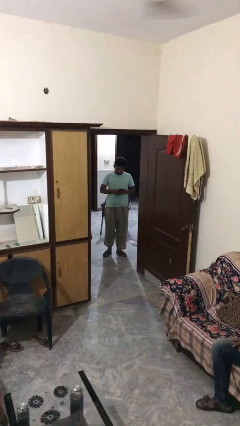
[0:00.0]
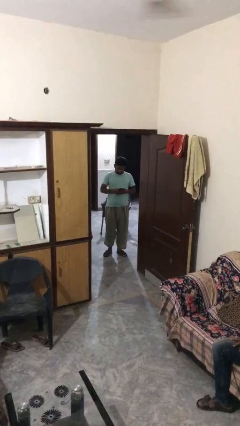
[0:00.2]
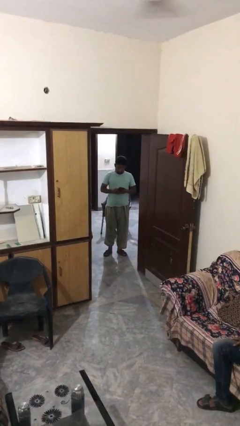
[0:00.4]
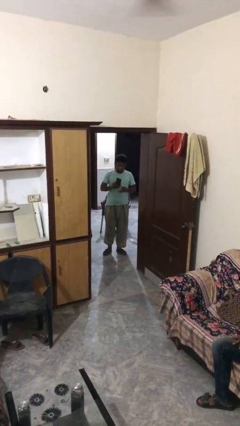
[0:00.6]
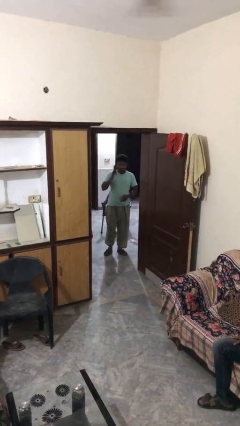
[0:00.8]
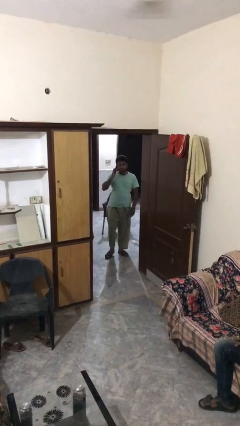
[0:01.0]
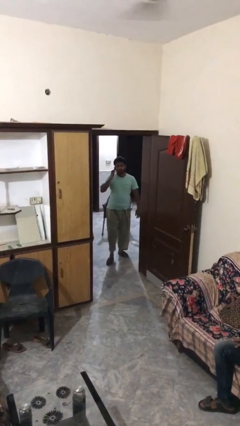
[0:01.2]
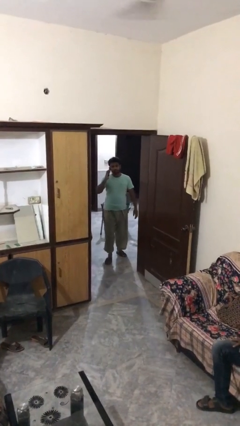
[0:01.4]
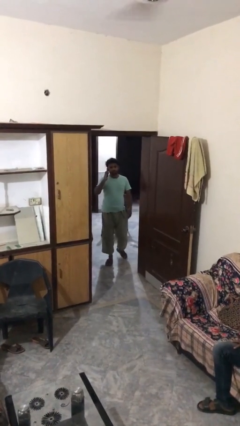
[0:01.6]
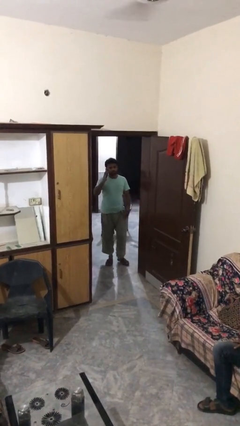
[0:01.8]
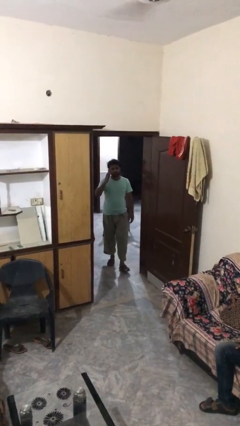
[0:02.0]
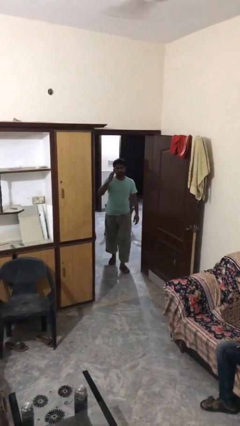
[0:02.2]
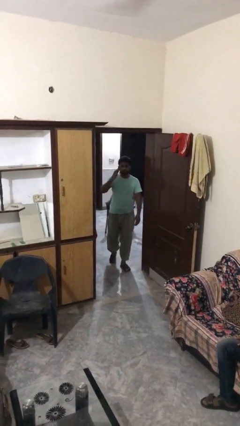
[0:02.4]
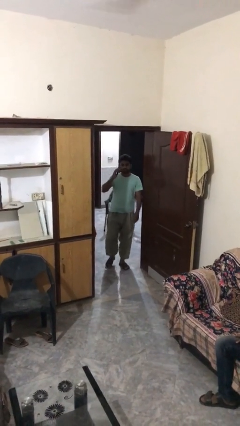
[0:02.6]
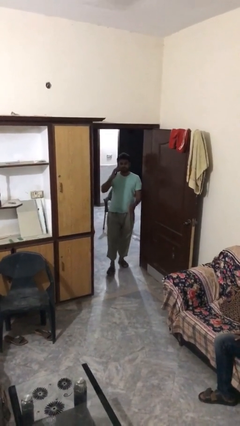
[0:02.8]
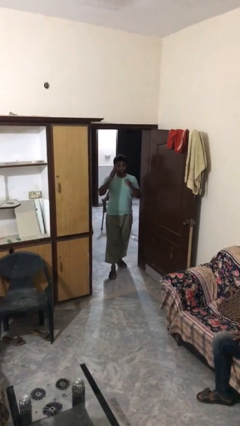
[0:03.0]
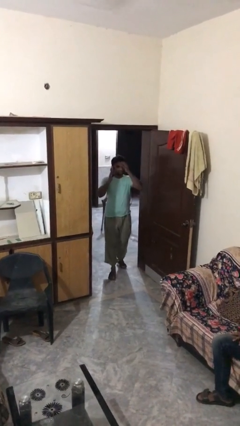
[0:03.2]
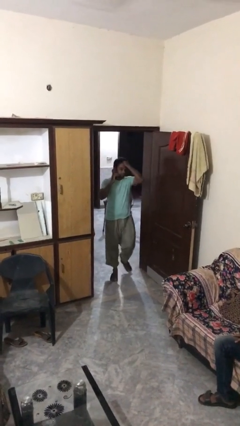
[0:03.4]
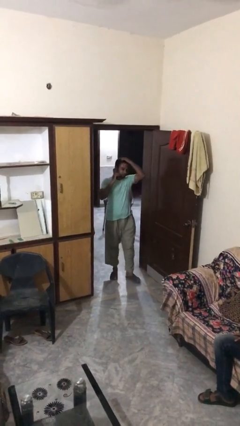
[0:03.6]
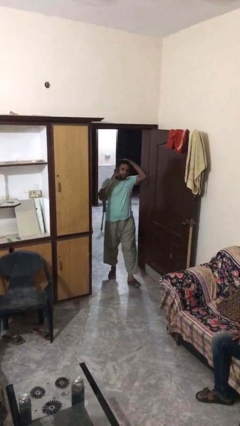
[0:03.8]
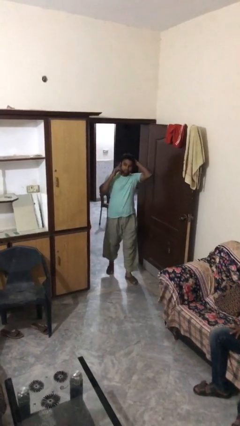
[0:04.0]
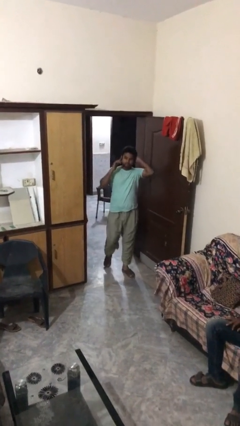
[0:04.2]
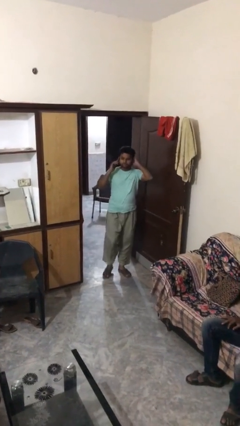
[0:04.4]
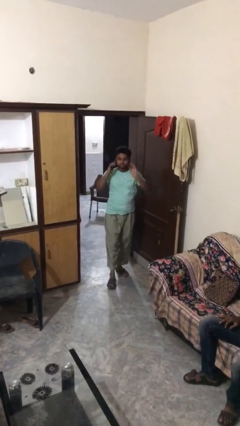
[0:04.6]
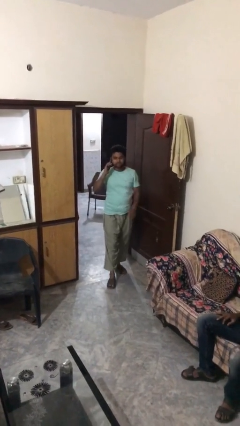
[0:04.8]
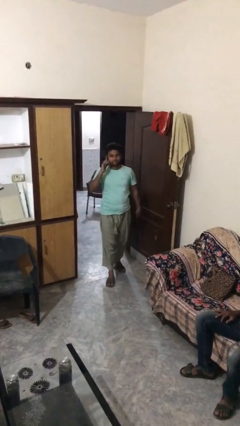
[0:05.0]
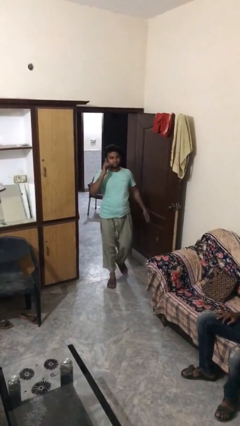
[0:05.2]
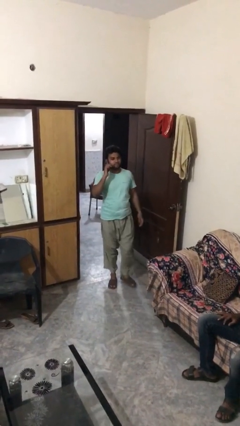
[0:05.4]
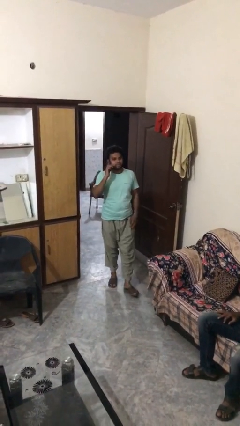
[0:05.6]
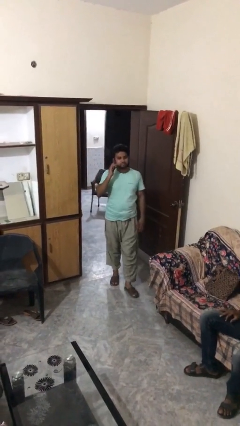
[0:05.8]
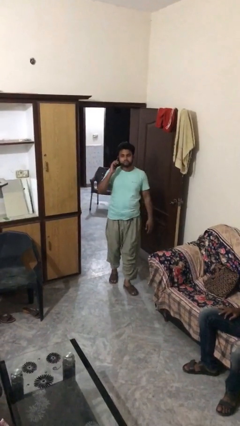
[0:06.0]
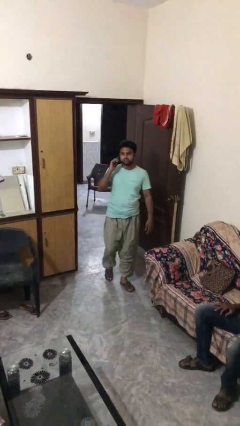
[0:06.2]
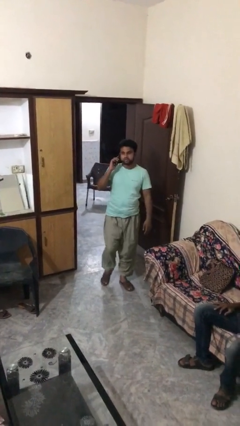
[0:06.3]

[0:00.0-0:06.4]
person enters scene through structure

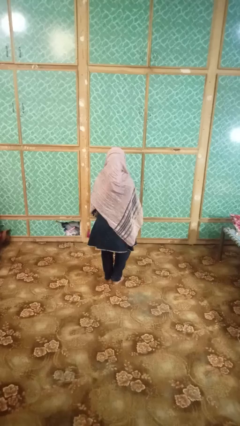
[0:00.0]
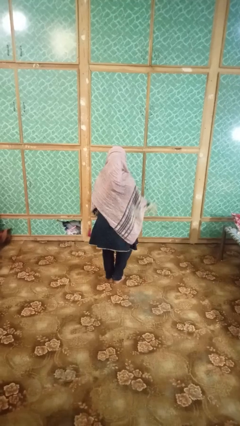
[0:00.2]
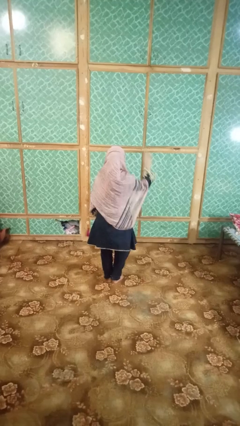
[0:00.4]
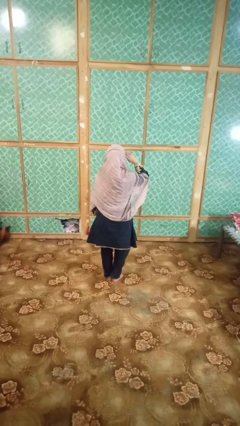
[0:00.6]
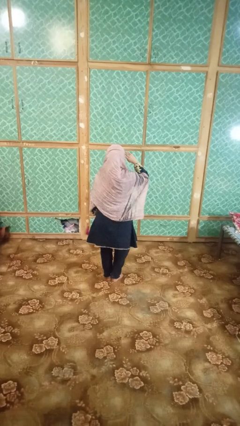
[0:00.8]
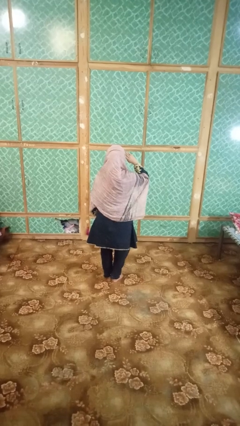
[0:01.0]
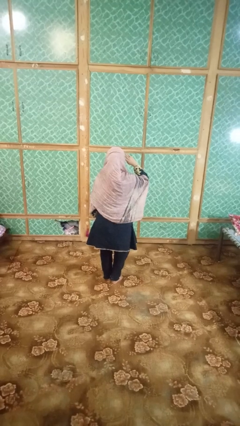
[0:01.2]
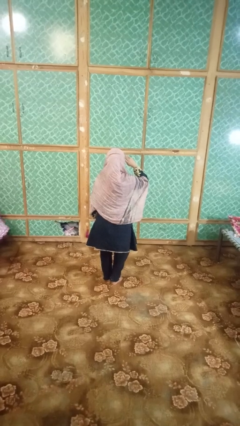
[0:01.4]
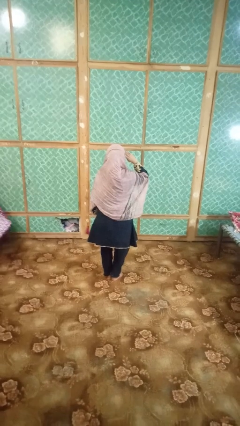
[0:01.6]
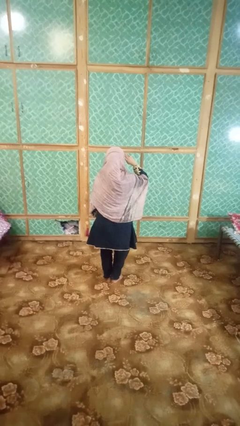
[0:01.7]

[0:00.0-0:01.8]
person salutes

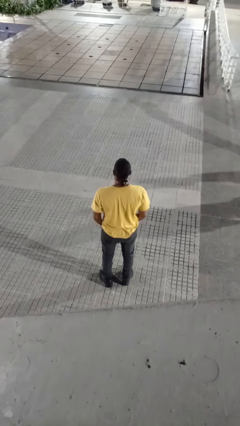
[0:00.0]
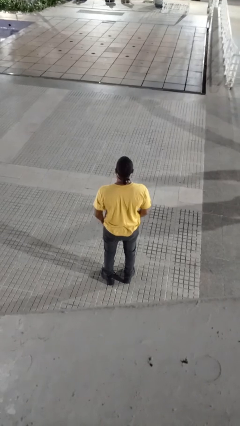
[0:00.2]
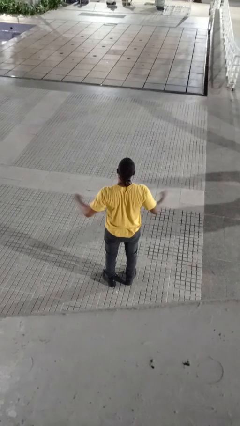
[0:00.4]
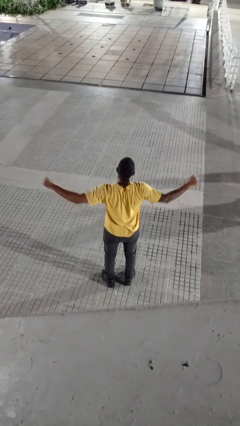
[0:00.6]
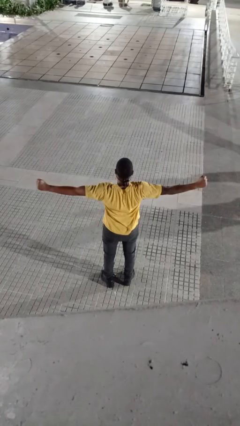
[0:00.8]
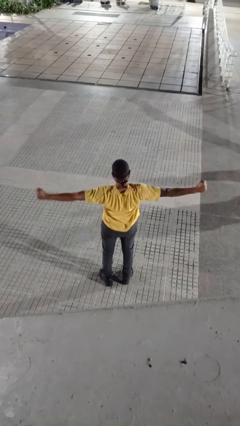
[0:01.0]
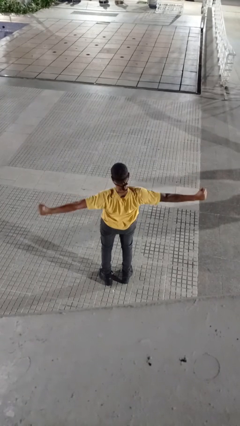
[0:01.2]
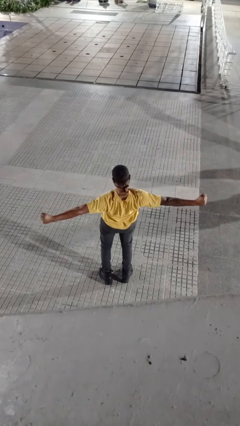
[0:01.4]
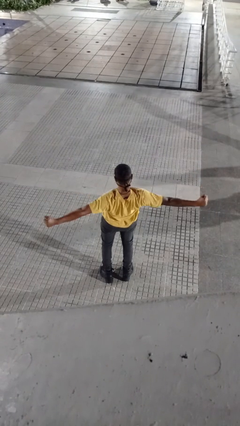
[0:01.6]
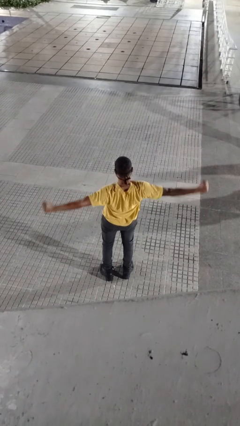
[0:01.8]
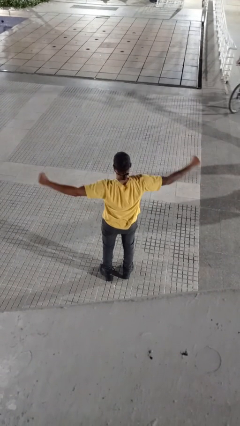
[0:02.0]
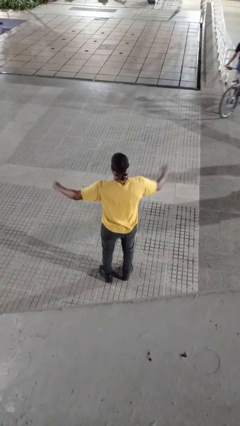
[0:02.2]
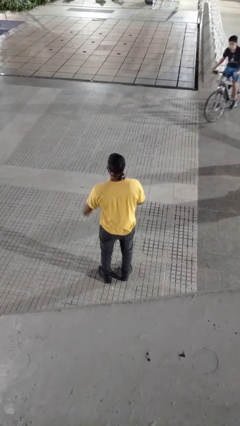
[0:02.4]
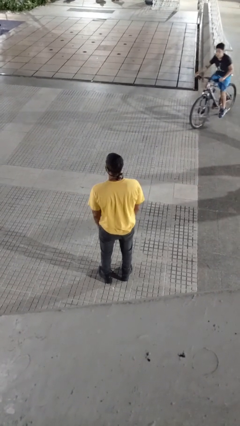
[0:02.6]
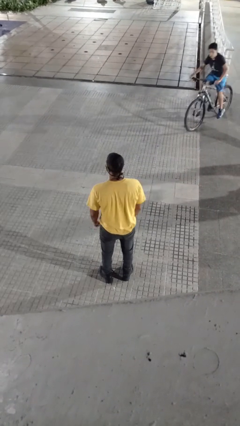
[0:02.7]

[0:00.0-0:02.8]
person stretches arms to side

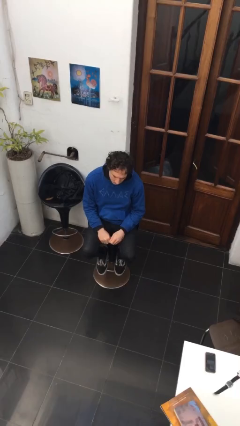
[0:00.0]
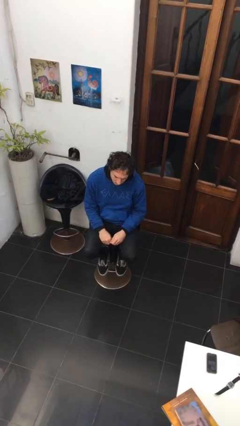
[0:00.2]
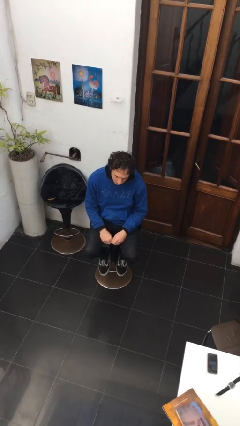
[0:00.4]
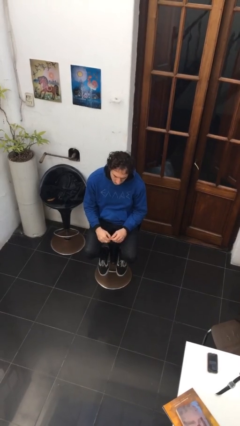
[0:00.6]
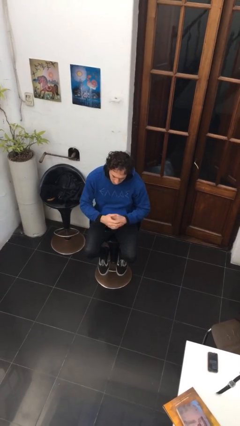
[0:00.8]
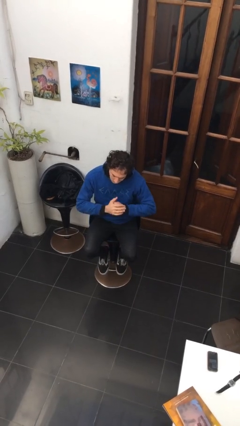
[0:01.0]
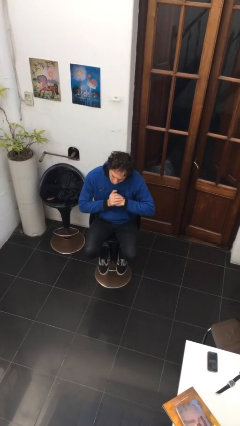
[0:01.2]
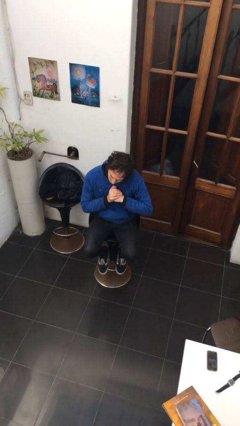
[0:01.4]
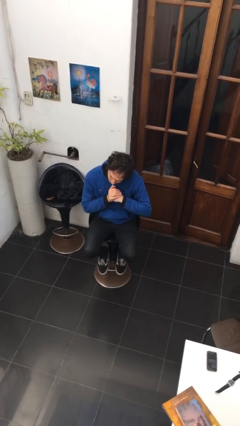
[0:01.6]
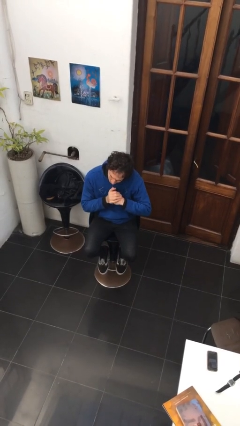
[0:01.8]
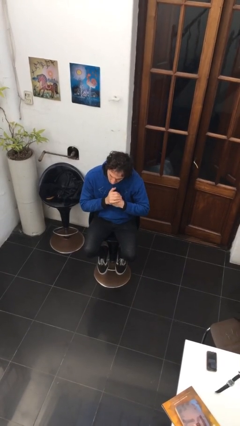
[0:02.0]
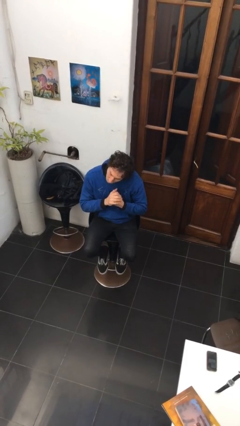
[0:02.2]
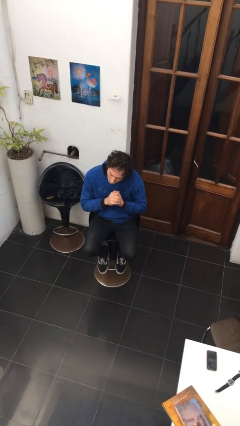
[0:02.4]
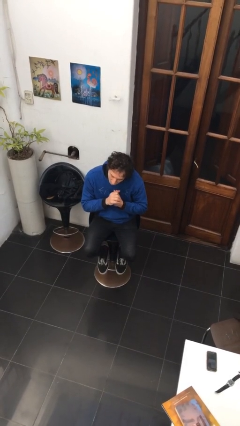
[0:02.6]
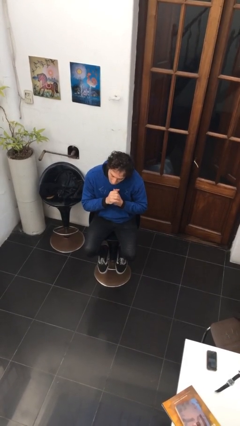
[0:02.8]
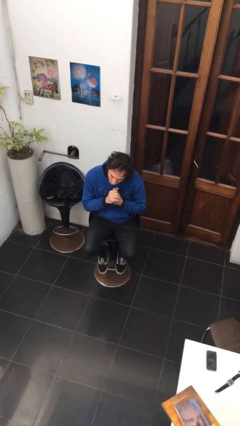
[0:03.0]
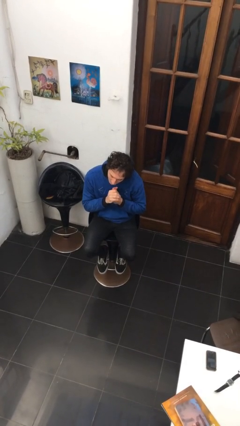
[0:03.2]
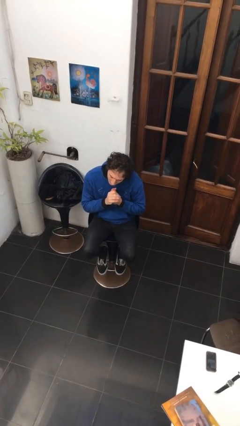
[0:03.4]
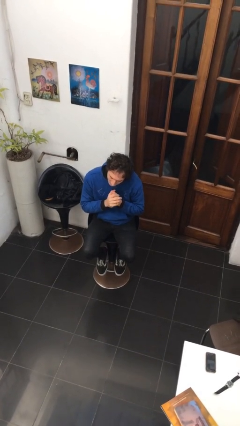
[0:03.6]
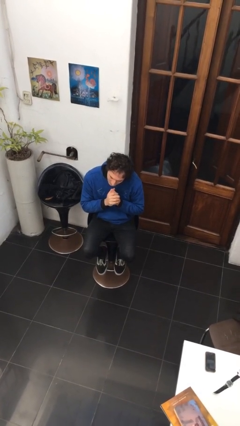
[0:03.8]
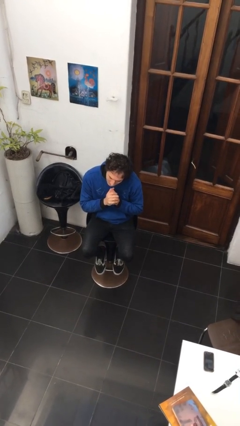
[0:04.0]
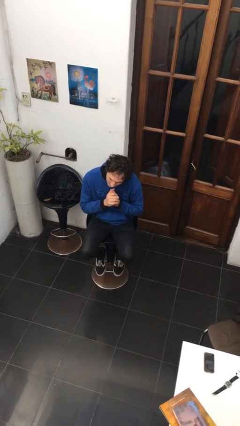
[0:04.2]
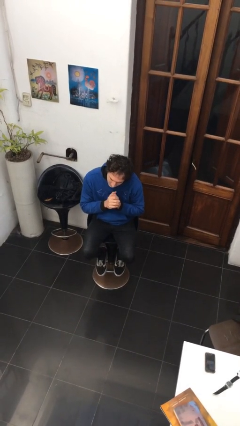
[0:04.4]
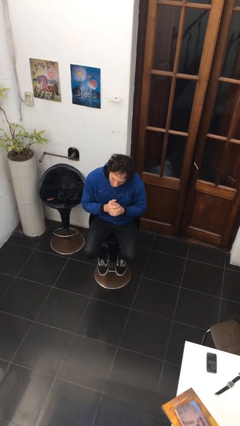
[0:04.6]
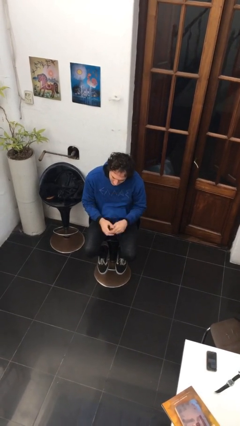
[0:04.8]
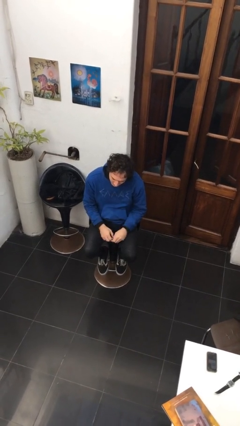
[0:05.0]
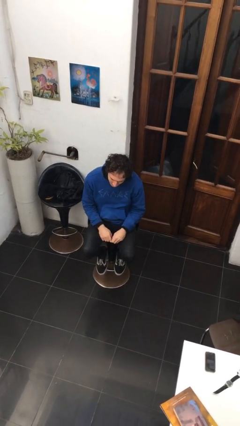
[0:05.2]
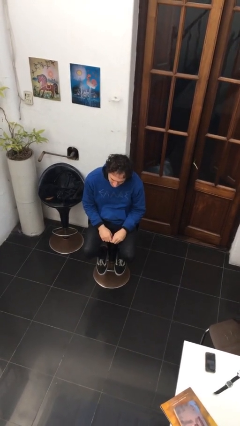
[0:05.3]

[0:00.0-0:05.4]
person cracks knuckles

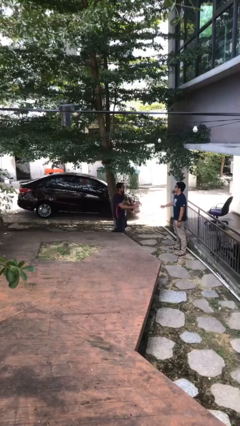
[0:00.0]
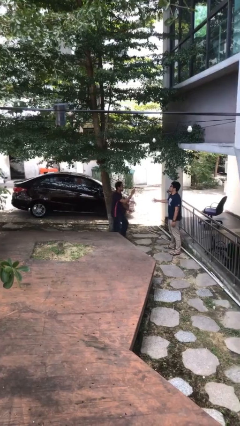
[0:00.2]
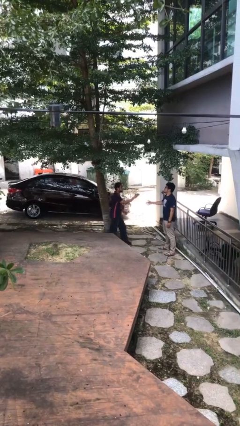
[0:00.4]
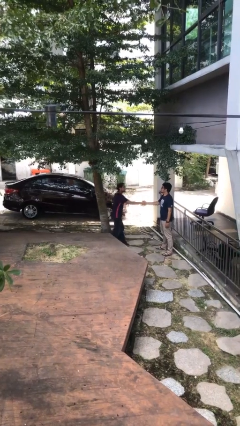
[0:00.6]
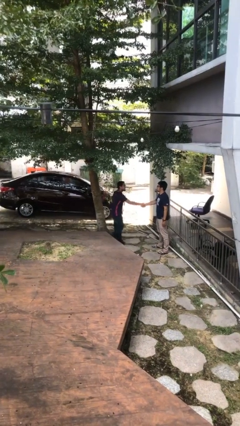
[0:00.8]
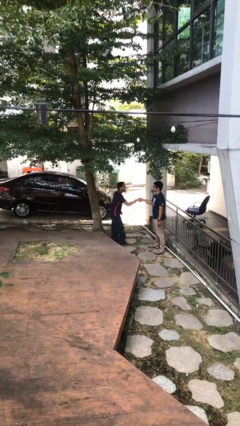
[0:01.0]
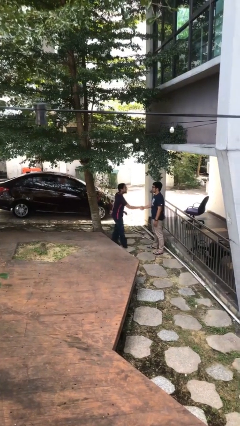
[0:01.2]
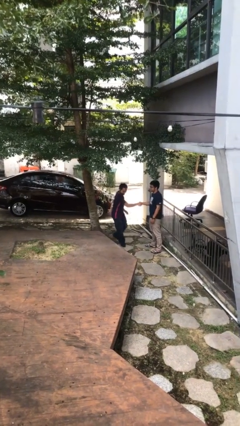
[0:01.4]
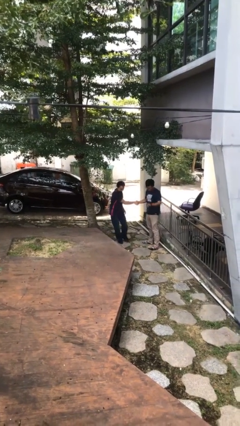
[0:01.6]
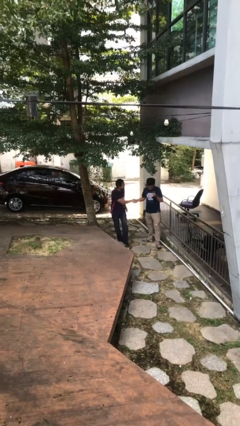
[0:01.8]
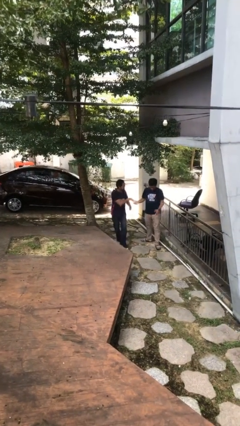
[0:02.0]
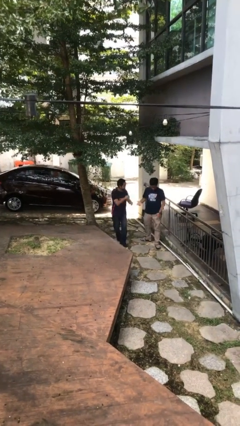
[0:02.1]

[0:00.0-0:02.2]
person shakes hand
